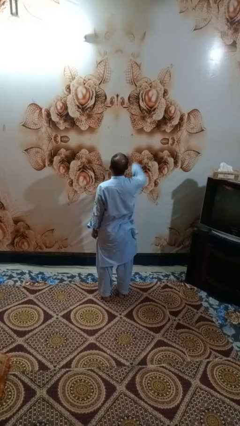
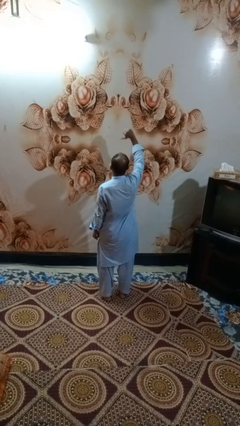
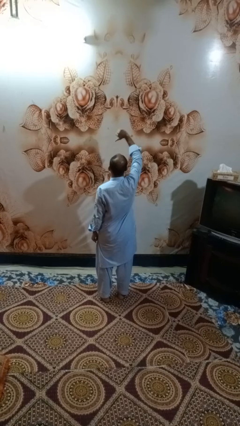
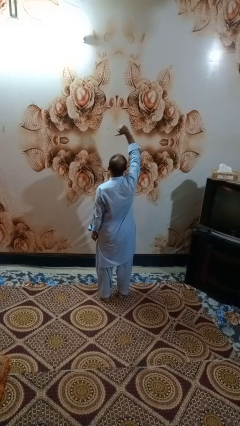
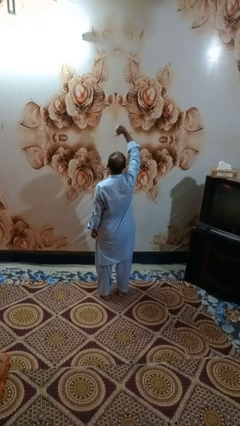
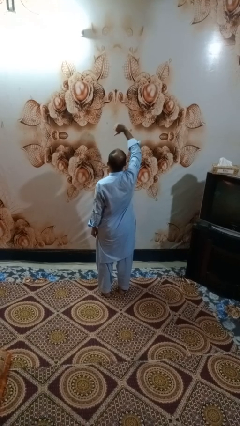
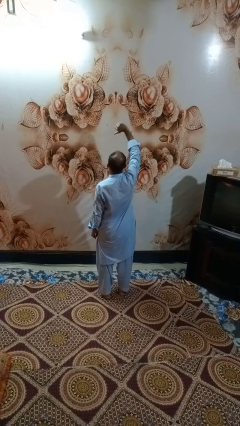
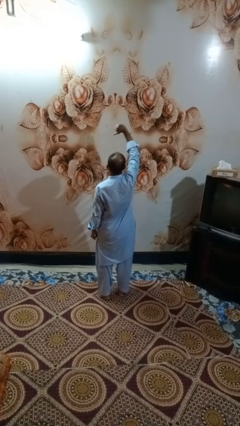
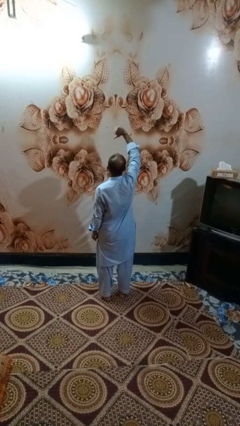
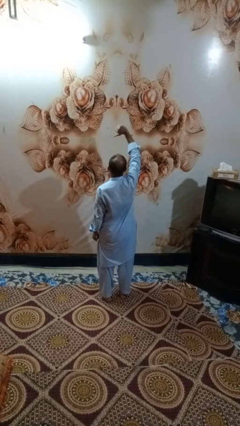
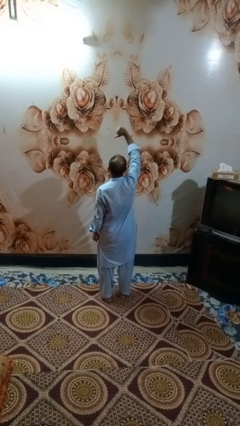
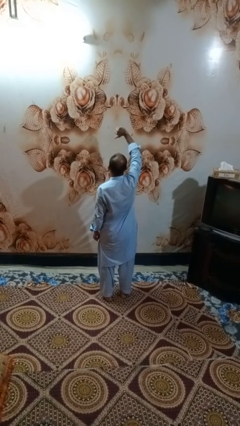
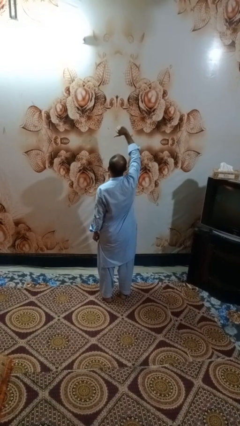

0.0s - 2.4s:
person gestures thumbs down

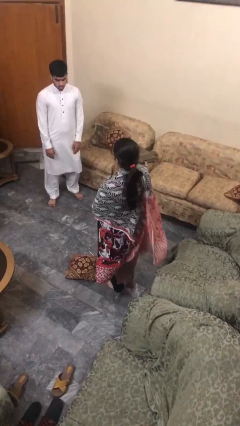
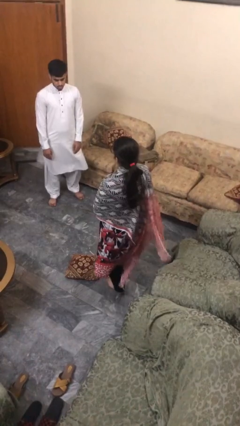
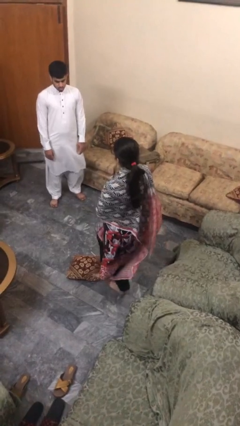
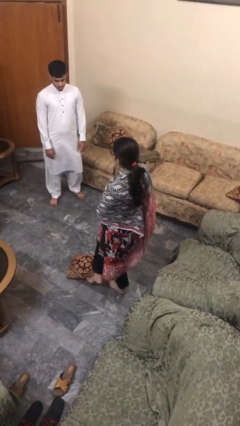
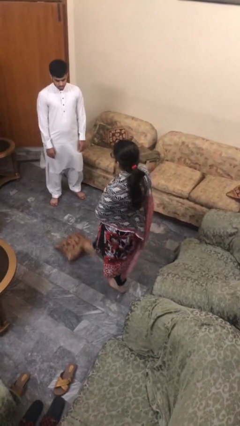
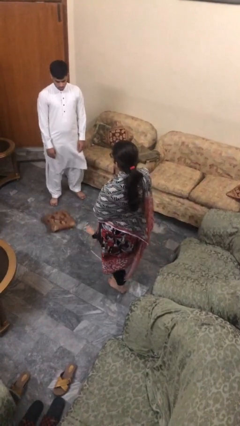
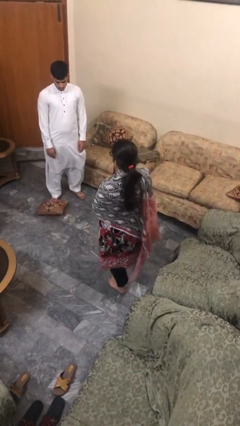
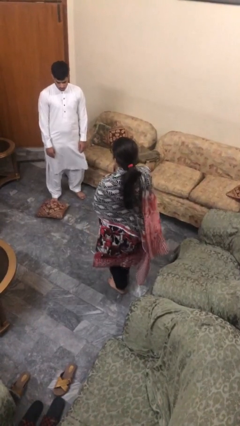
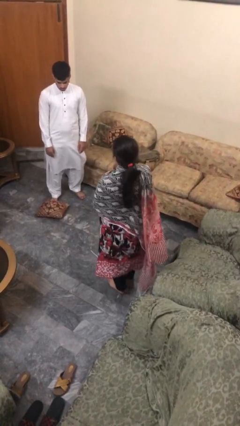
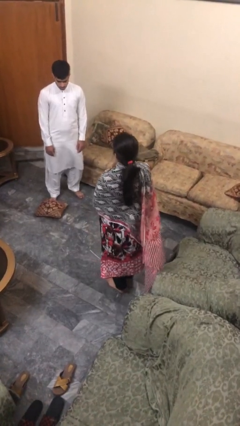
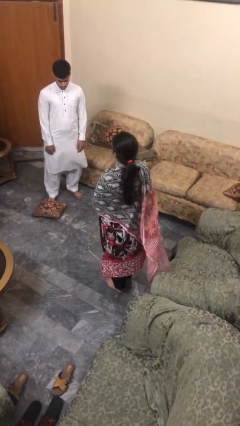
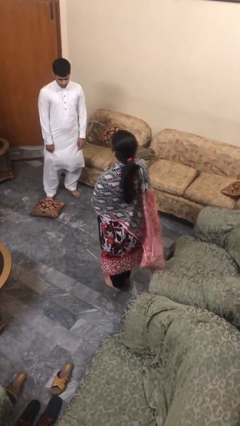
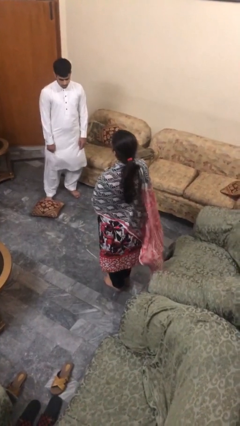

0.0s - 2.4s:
person kicks object to person

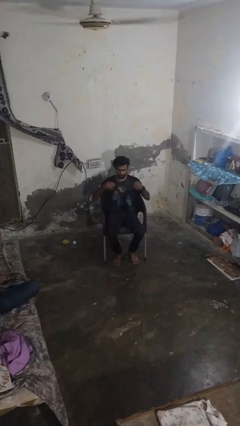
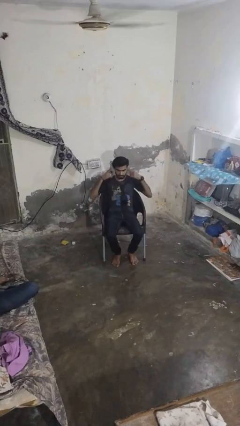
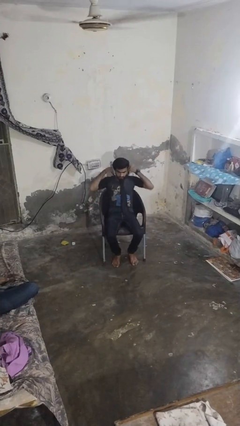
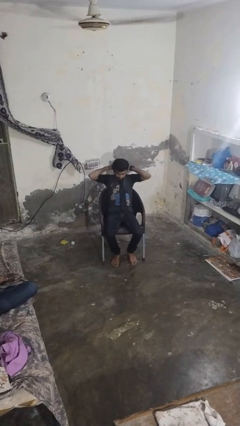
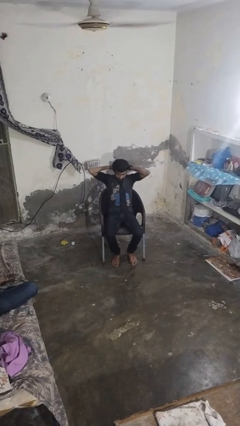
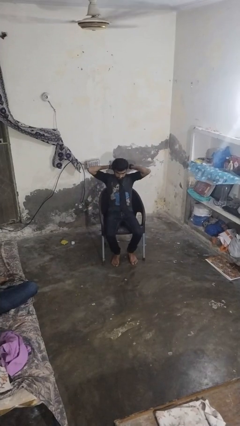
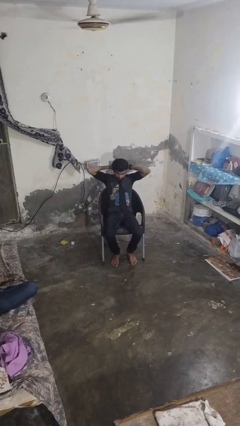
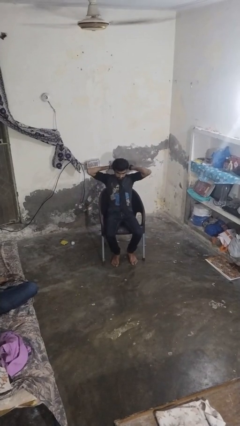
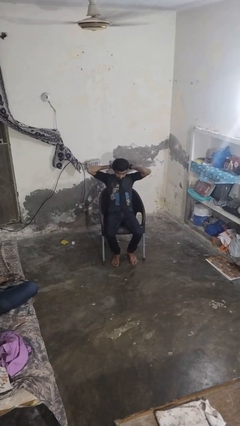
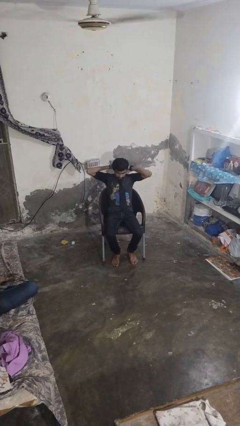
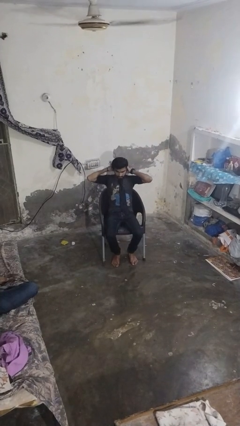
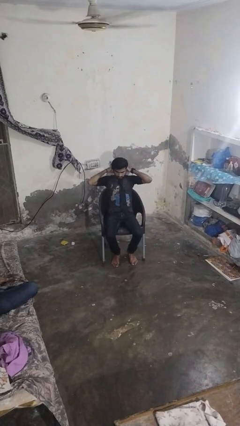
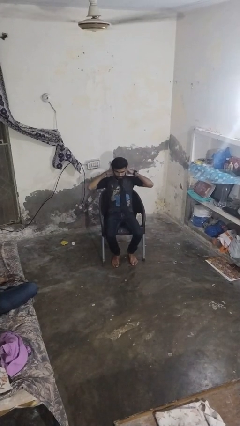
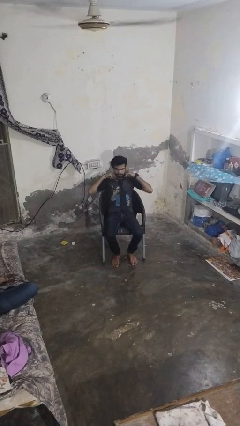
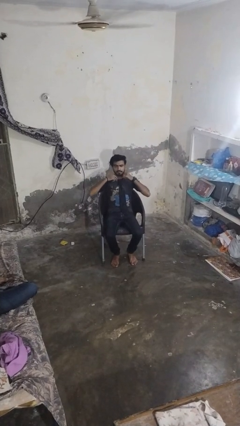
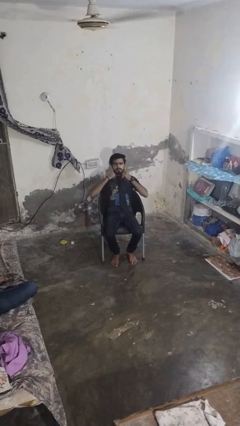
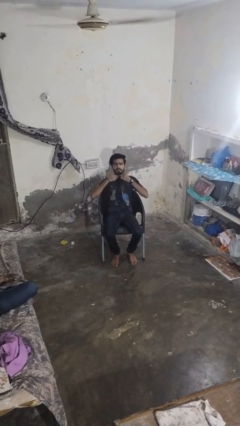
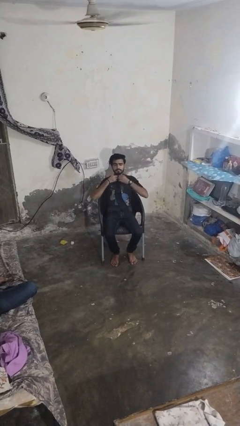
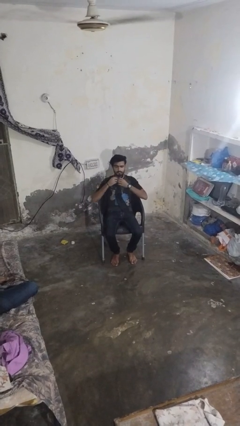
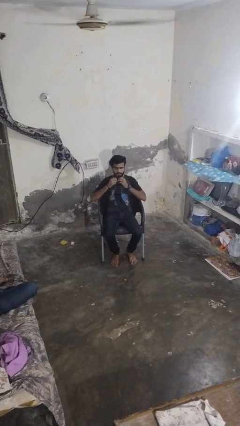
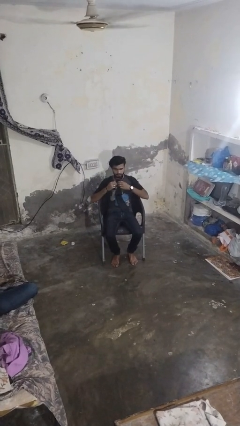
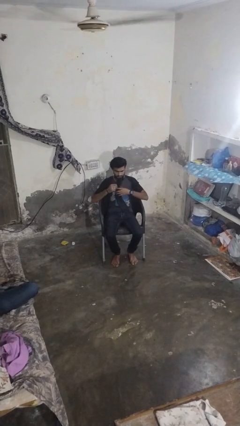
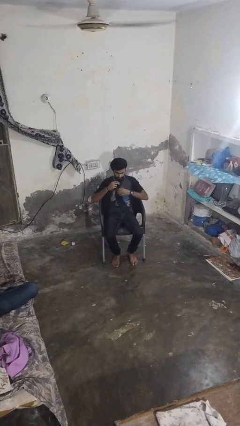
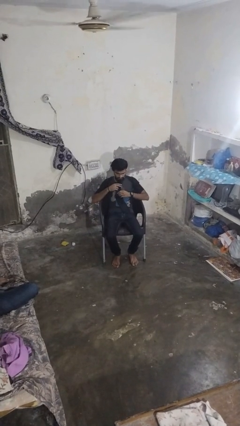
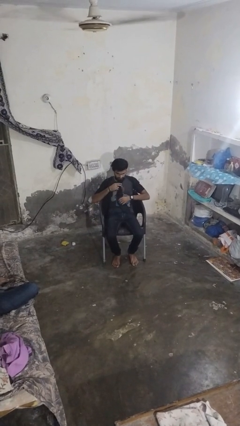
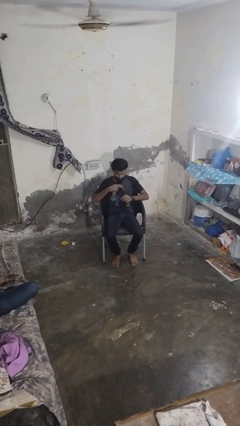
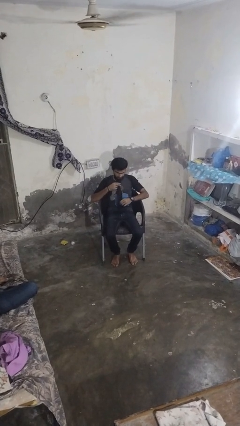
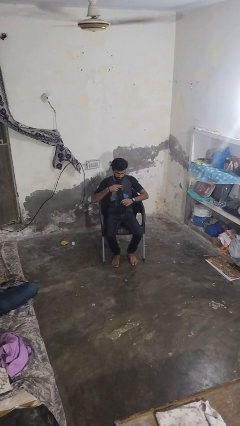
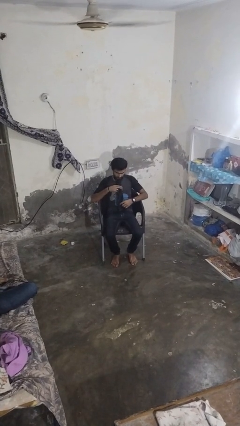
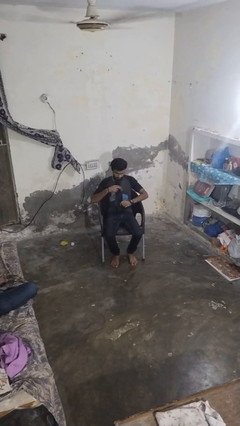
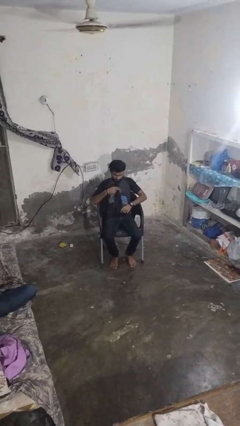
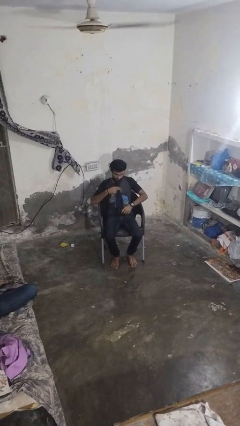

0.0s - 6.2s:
person puts on necktie

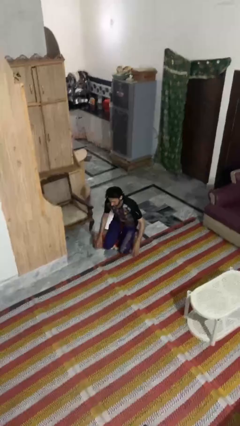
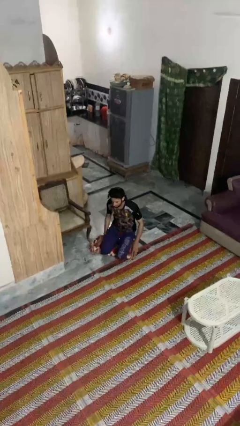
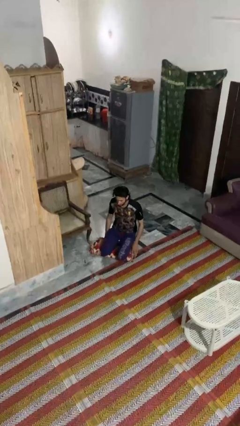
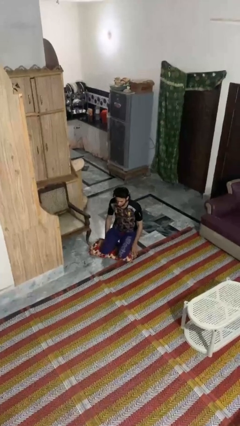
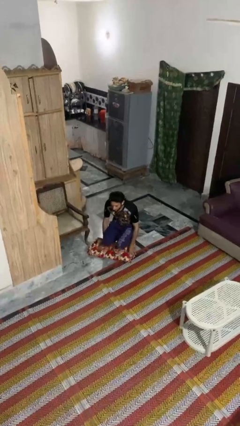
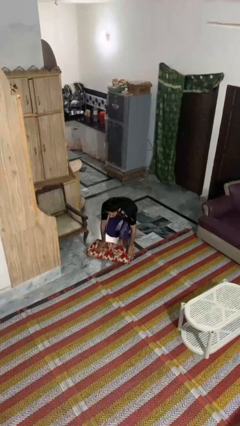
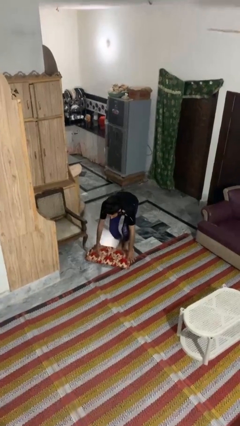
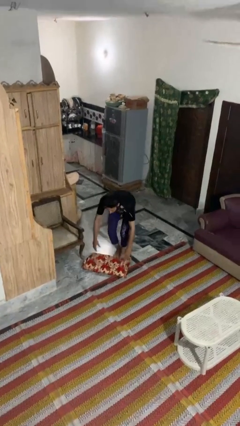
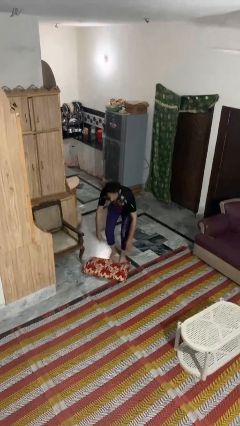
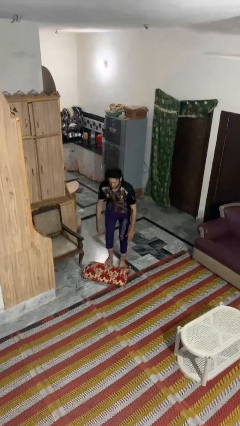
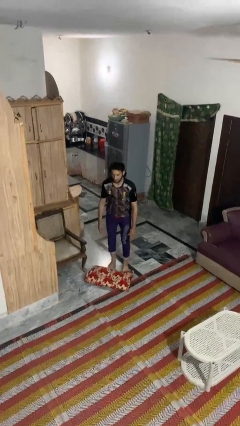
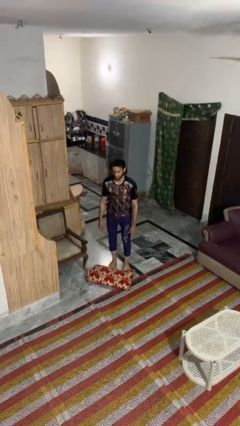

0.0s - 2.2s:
person stands up from floor

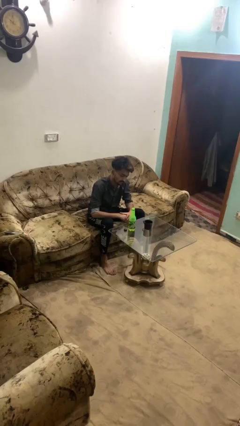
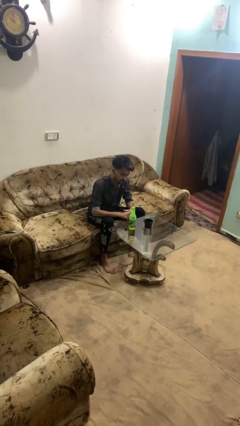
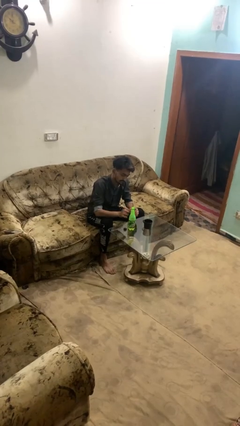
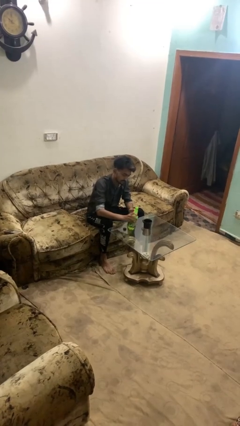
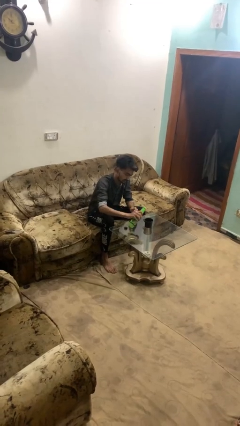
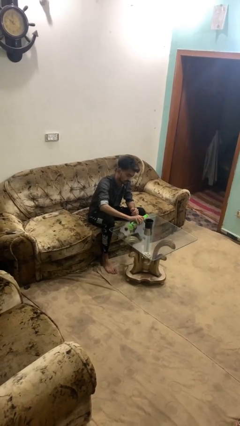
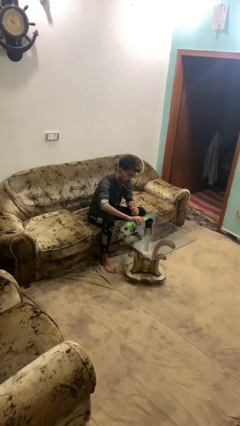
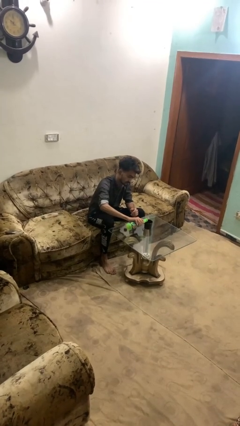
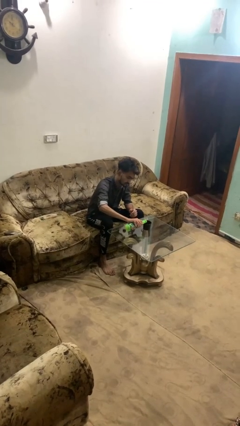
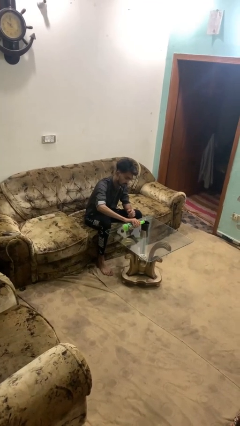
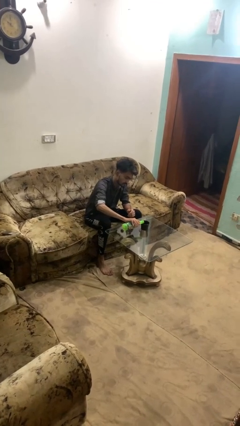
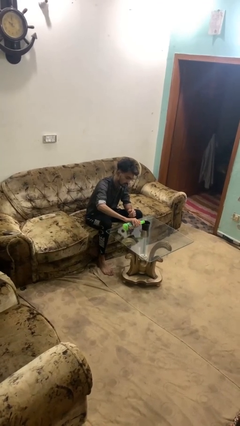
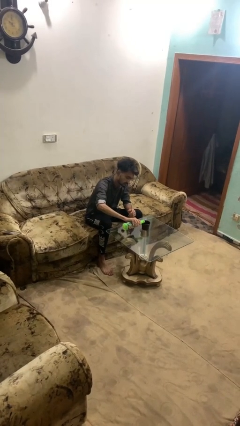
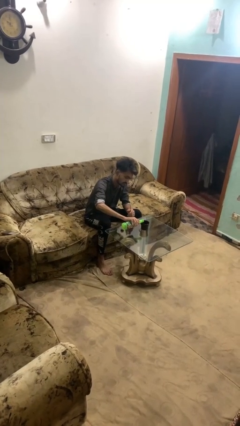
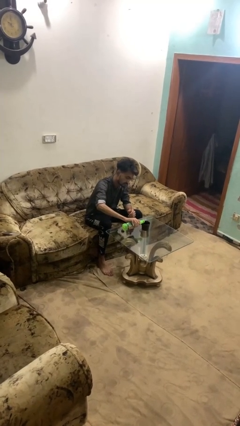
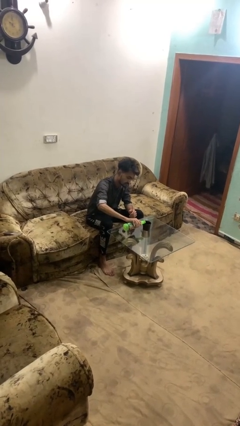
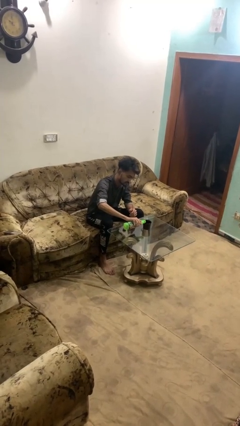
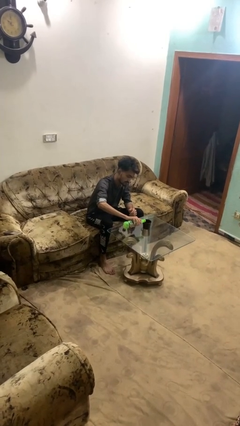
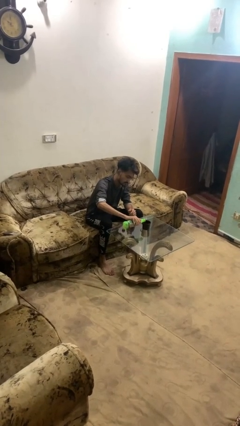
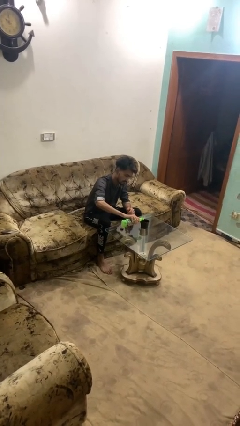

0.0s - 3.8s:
person pours liquid into cup

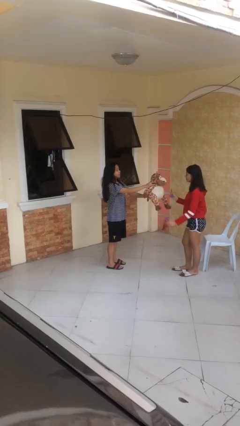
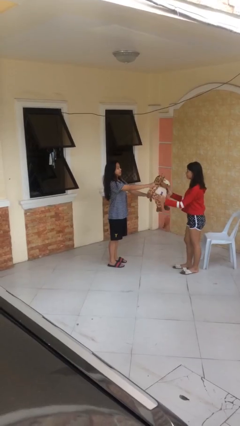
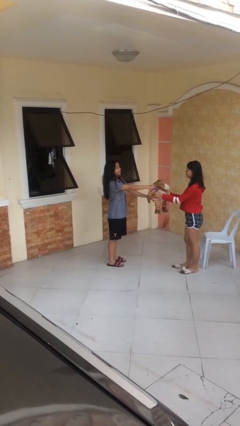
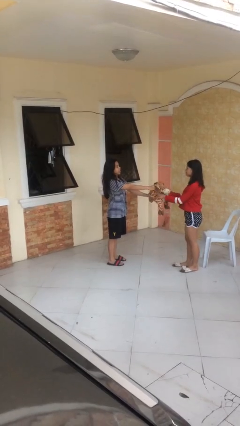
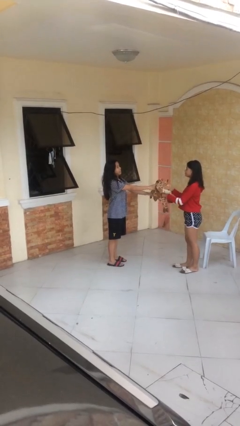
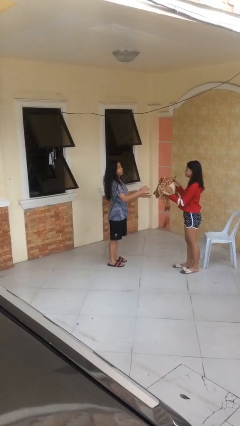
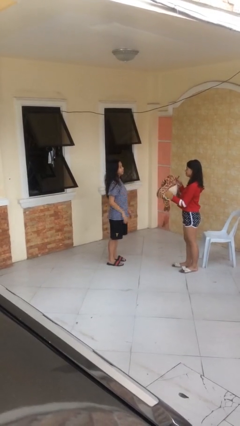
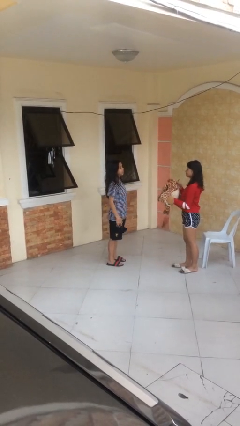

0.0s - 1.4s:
person transfers object to person
